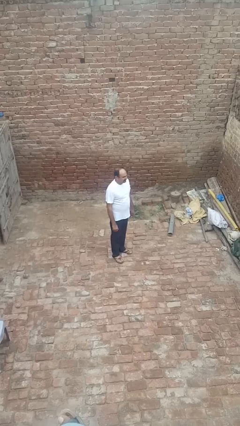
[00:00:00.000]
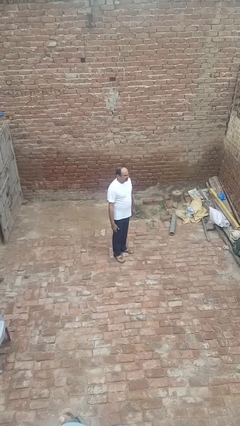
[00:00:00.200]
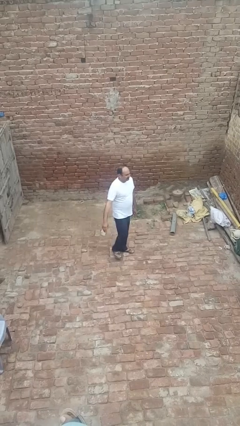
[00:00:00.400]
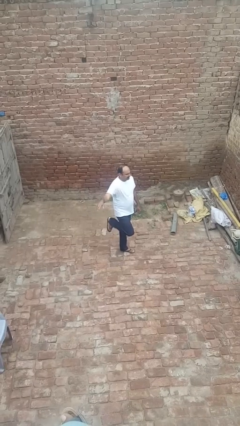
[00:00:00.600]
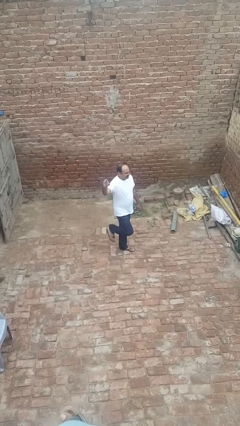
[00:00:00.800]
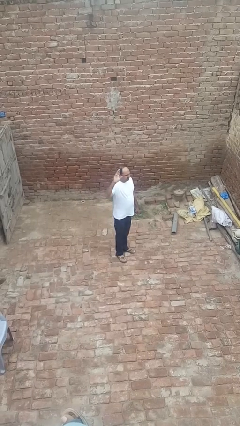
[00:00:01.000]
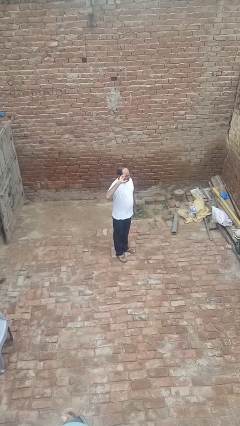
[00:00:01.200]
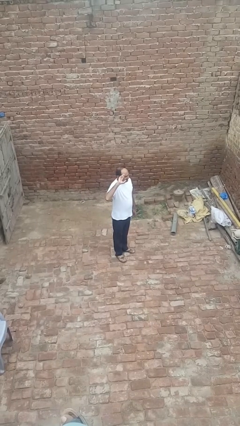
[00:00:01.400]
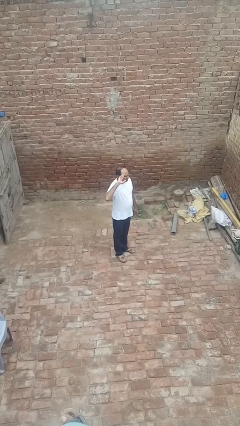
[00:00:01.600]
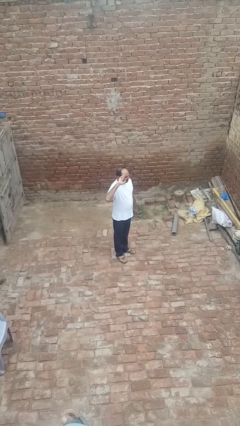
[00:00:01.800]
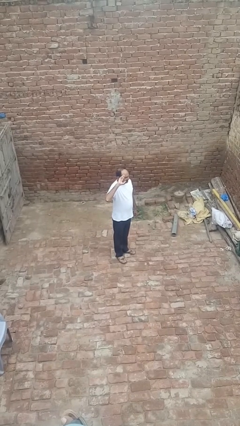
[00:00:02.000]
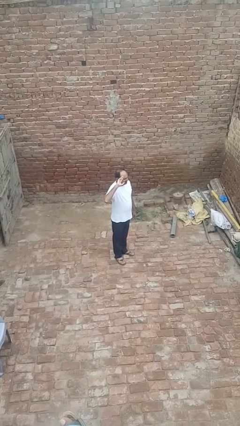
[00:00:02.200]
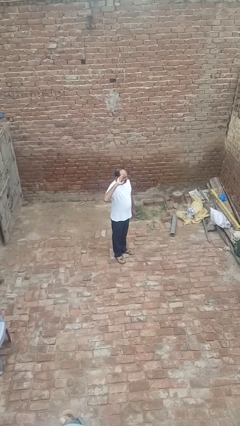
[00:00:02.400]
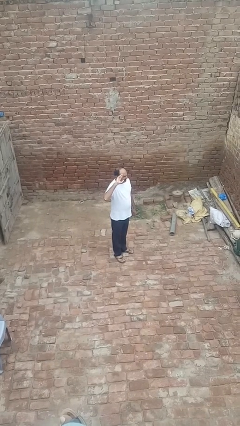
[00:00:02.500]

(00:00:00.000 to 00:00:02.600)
person salutes

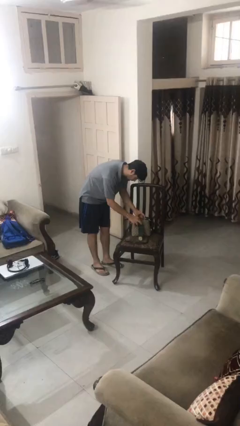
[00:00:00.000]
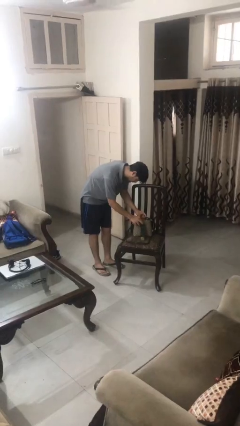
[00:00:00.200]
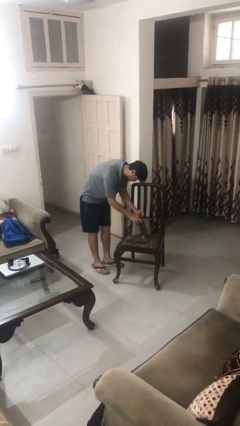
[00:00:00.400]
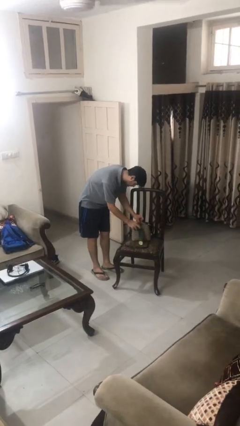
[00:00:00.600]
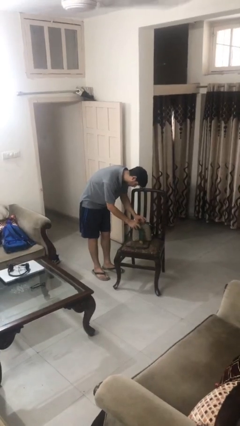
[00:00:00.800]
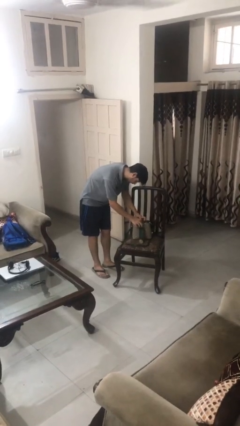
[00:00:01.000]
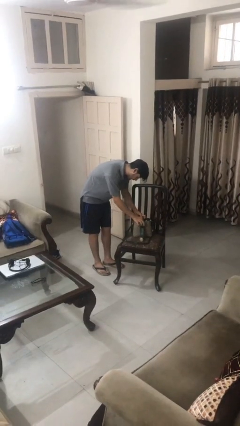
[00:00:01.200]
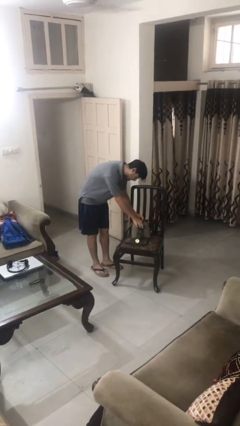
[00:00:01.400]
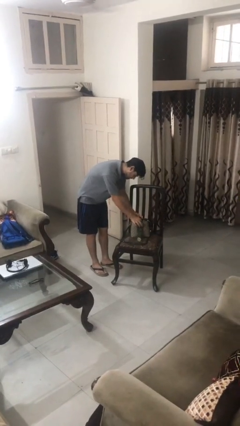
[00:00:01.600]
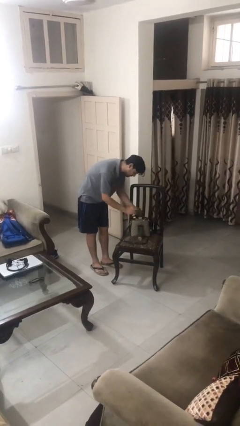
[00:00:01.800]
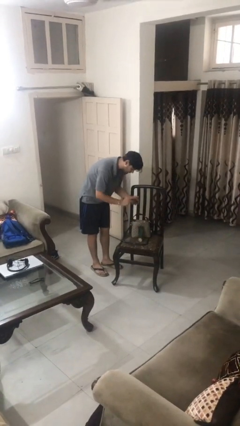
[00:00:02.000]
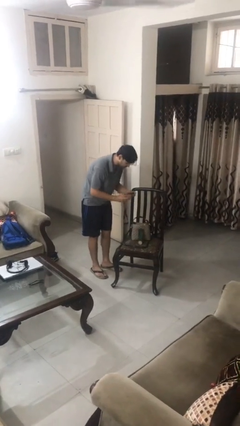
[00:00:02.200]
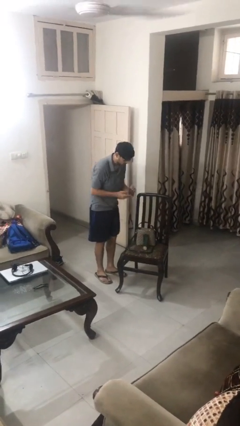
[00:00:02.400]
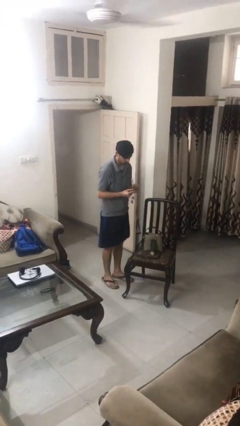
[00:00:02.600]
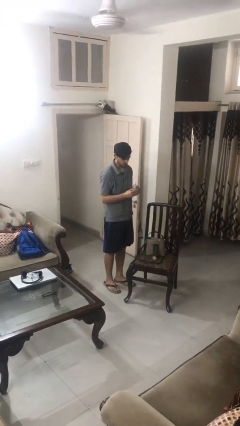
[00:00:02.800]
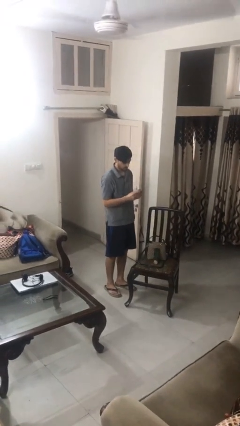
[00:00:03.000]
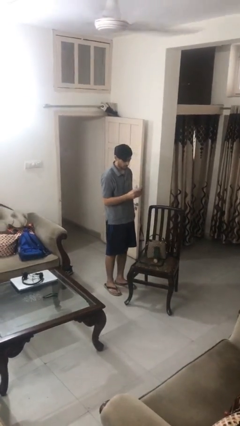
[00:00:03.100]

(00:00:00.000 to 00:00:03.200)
person takes object from purse

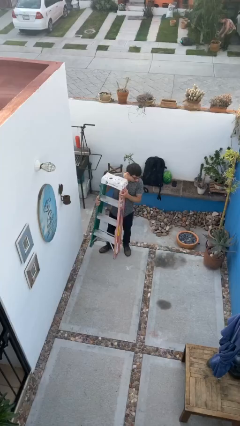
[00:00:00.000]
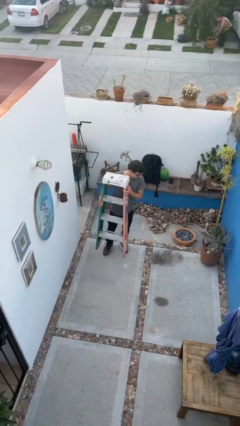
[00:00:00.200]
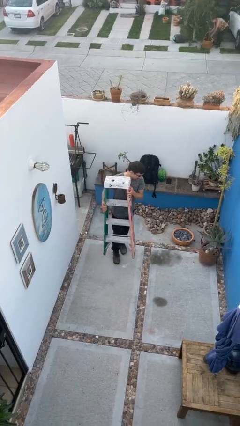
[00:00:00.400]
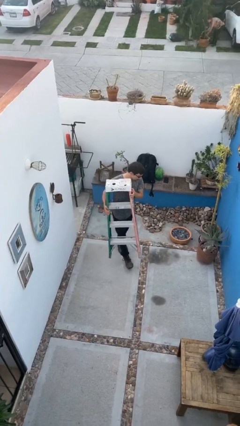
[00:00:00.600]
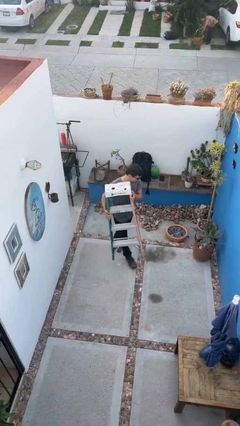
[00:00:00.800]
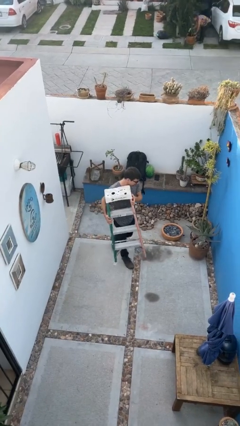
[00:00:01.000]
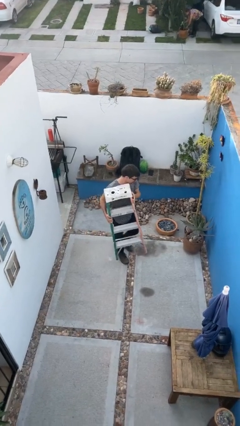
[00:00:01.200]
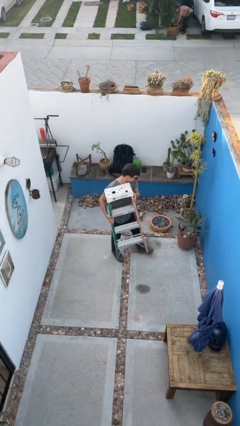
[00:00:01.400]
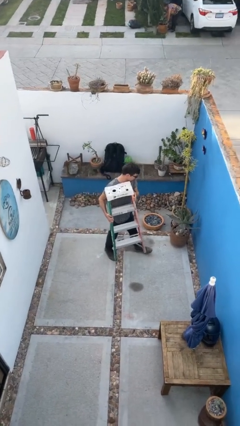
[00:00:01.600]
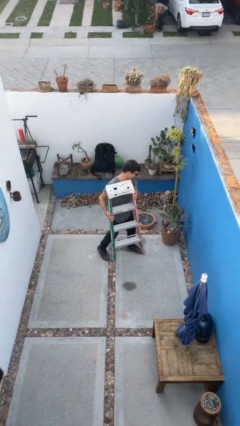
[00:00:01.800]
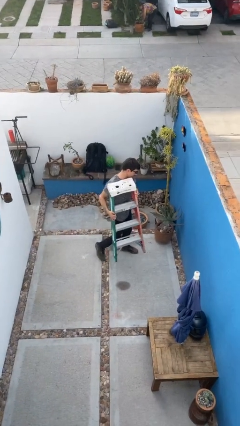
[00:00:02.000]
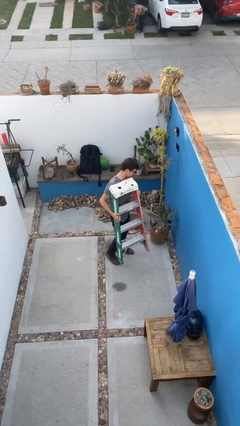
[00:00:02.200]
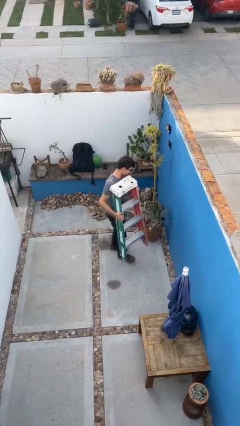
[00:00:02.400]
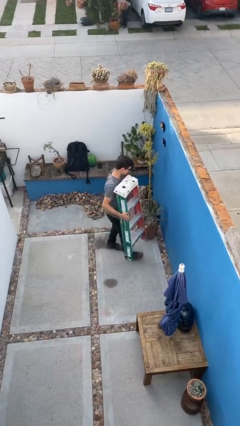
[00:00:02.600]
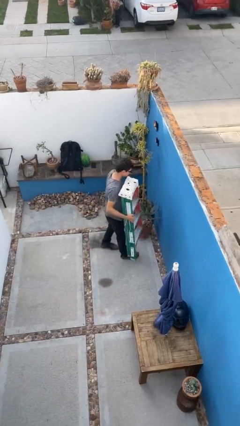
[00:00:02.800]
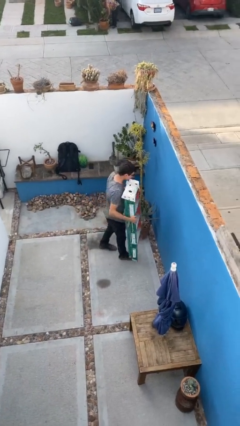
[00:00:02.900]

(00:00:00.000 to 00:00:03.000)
person carries heavy object

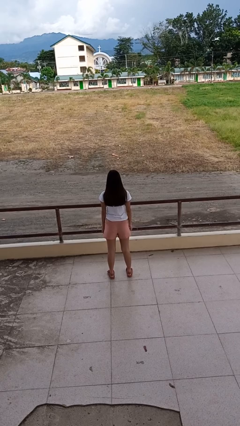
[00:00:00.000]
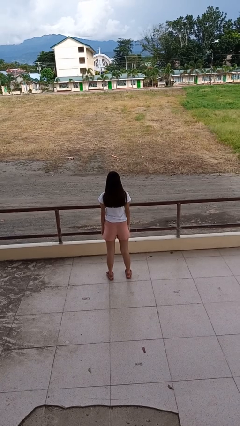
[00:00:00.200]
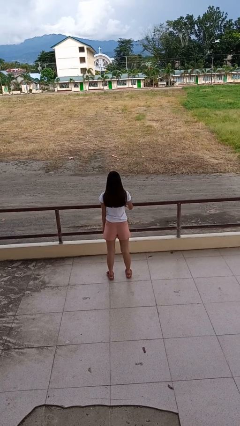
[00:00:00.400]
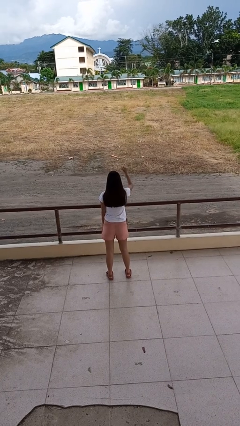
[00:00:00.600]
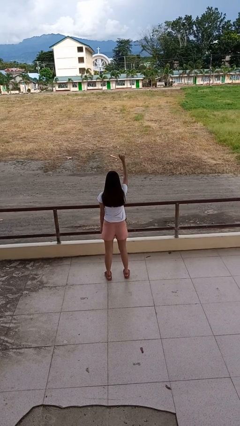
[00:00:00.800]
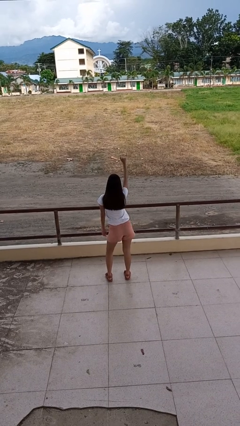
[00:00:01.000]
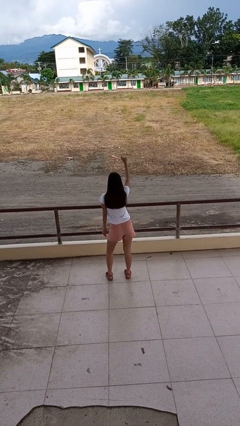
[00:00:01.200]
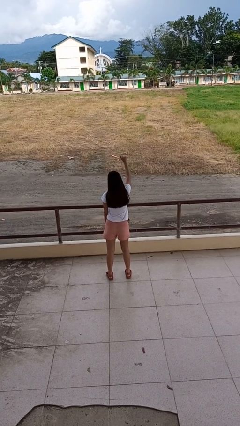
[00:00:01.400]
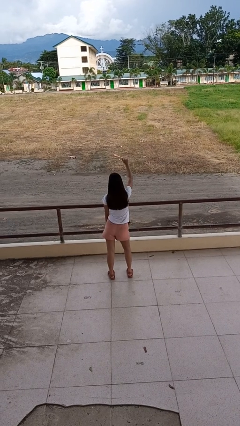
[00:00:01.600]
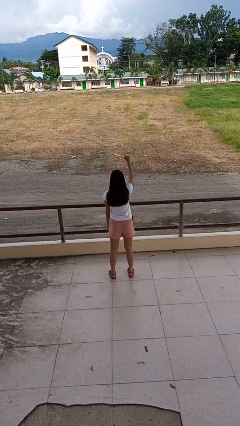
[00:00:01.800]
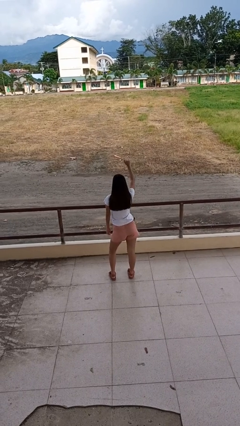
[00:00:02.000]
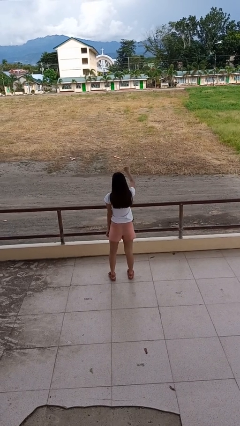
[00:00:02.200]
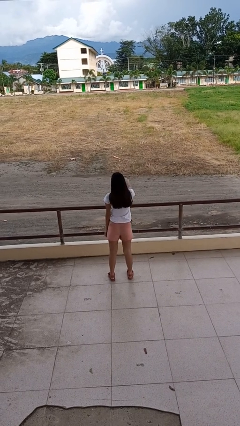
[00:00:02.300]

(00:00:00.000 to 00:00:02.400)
person dances in place

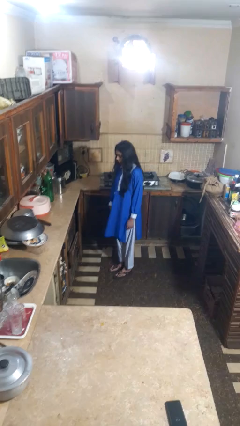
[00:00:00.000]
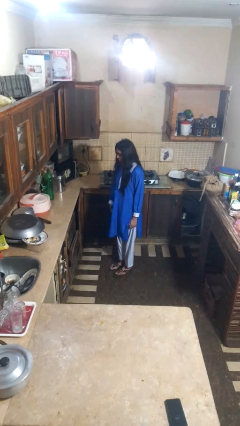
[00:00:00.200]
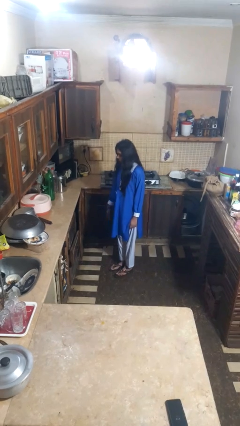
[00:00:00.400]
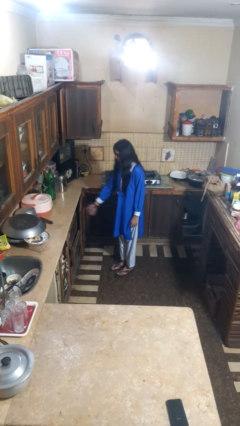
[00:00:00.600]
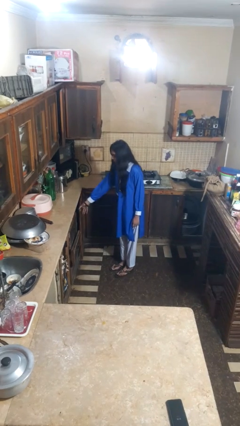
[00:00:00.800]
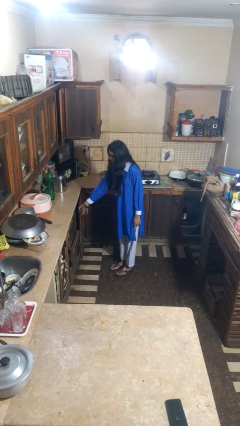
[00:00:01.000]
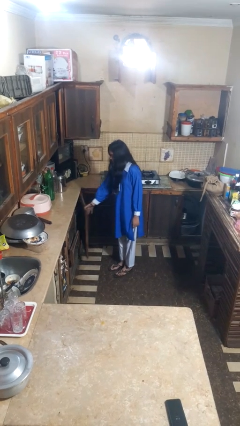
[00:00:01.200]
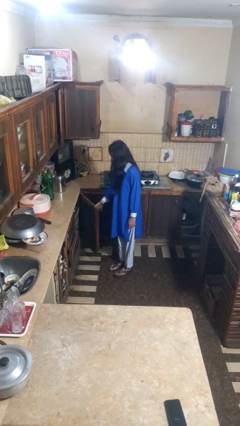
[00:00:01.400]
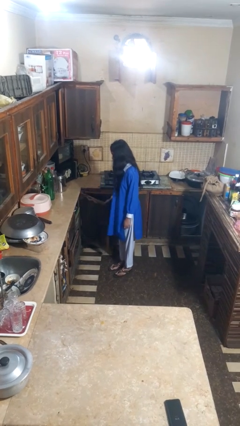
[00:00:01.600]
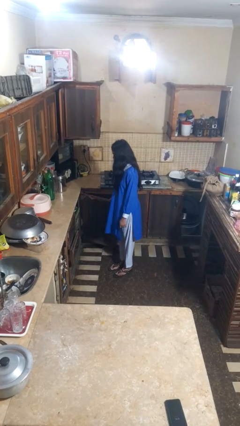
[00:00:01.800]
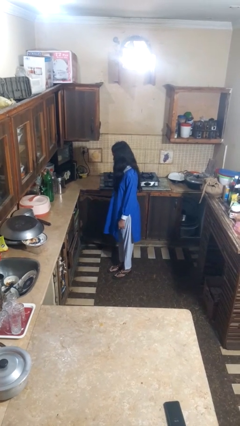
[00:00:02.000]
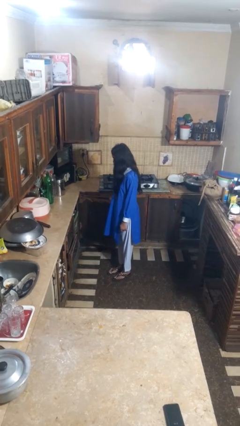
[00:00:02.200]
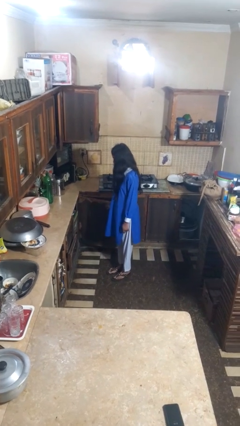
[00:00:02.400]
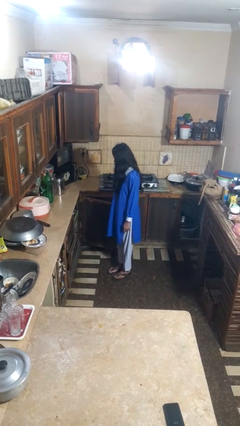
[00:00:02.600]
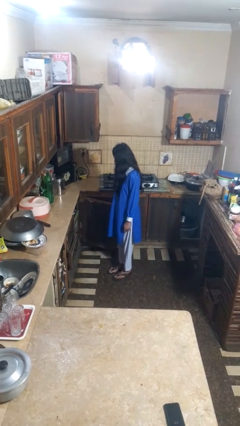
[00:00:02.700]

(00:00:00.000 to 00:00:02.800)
person opens closet door

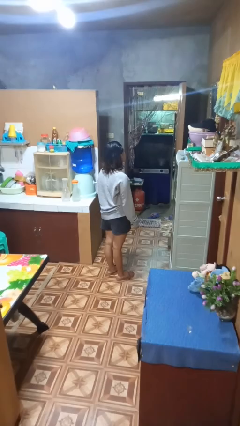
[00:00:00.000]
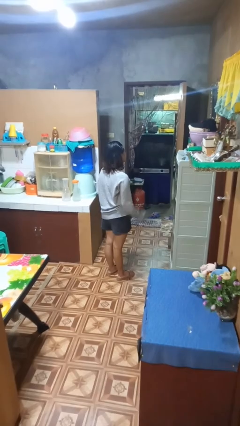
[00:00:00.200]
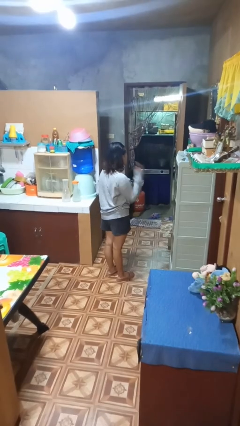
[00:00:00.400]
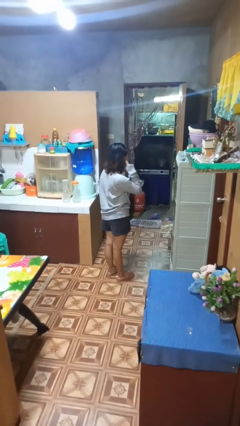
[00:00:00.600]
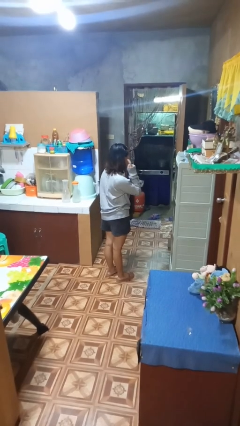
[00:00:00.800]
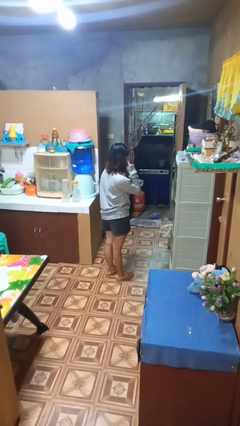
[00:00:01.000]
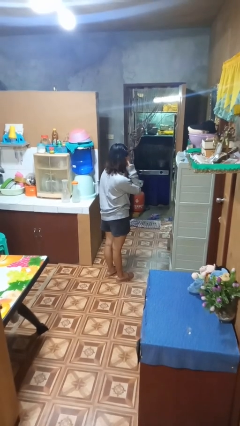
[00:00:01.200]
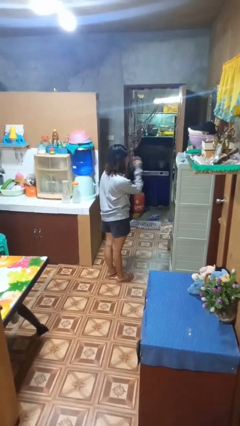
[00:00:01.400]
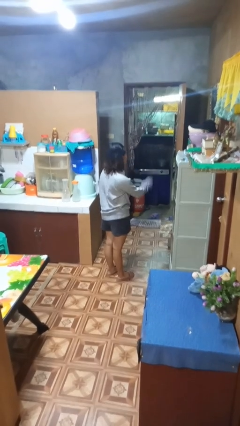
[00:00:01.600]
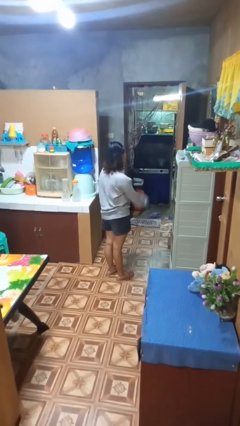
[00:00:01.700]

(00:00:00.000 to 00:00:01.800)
person gestures listen closely

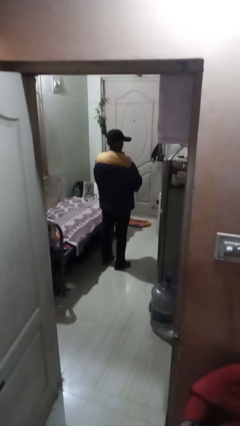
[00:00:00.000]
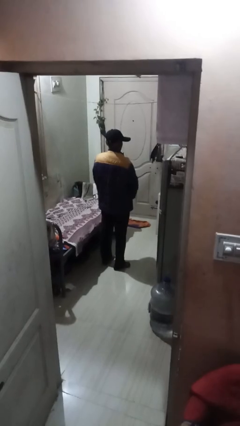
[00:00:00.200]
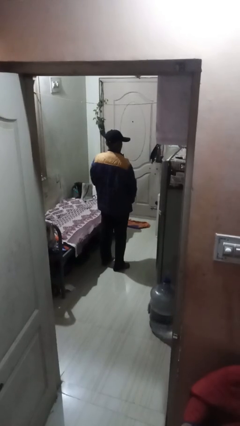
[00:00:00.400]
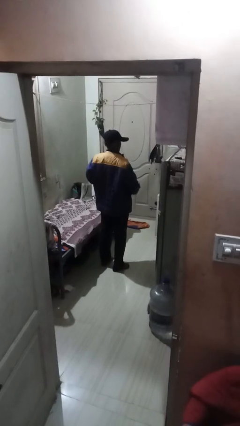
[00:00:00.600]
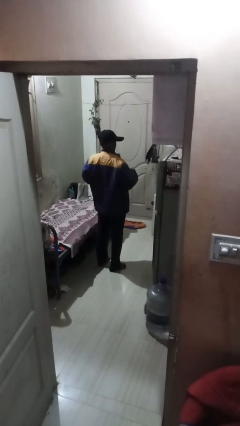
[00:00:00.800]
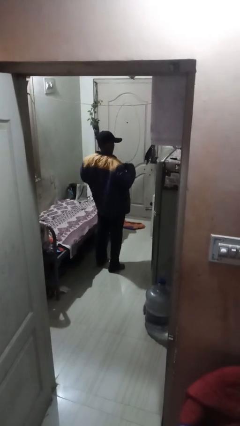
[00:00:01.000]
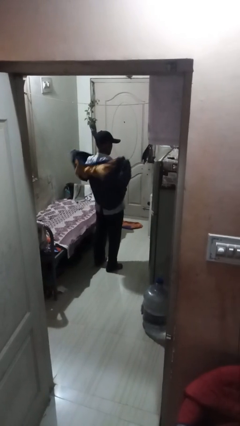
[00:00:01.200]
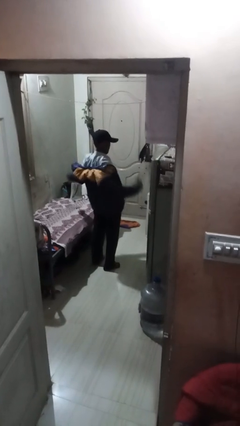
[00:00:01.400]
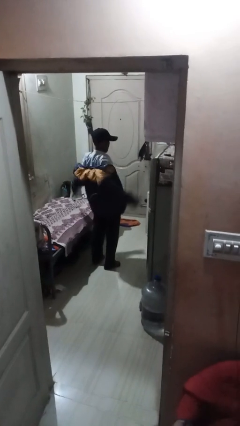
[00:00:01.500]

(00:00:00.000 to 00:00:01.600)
person unzips jacket
